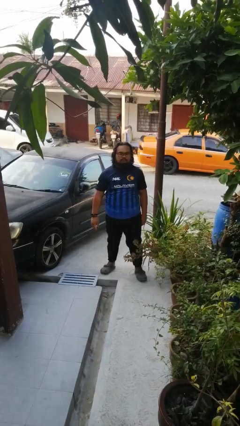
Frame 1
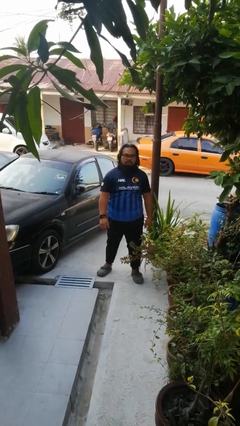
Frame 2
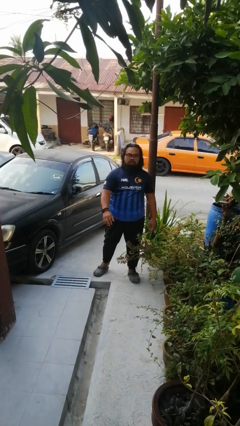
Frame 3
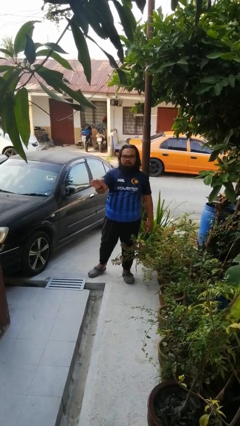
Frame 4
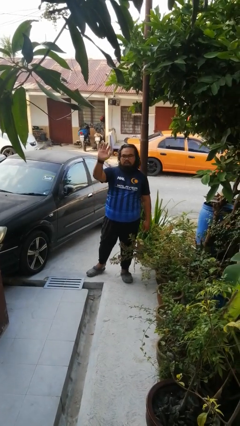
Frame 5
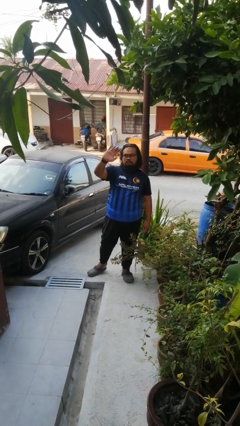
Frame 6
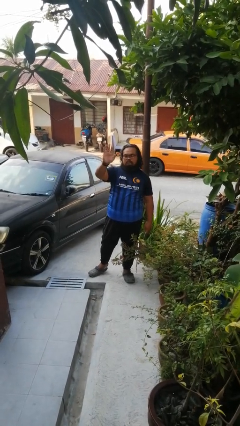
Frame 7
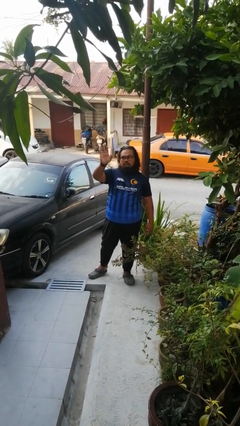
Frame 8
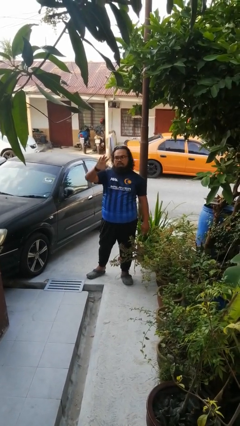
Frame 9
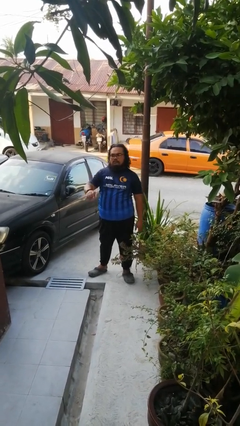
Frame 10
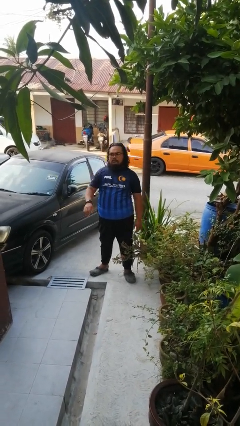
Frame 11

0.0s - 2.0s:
person waves at person

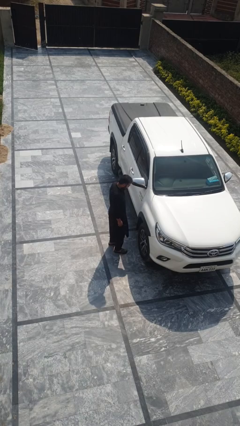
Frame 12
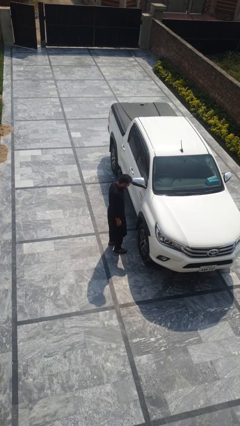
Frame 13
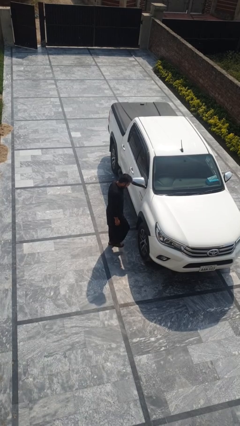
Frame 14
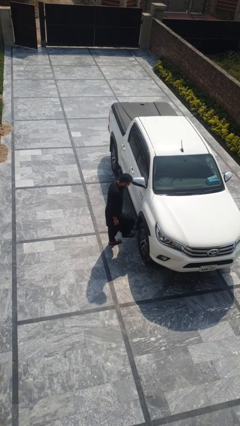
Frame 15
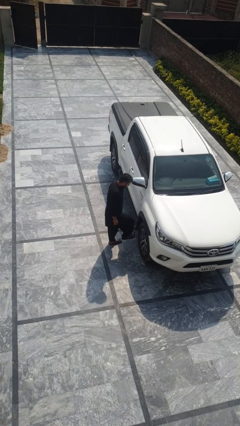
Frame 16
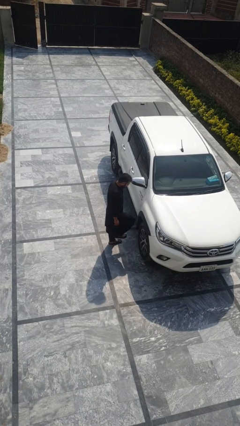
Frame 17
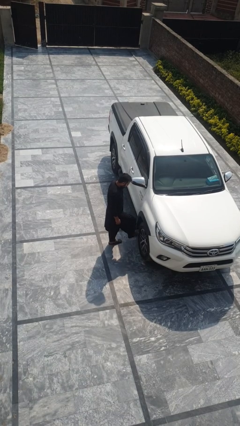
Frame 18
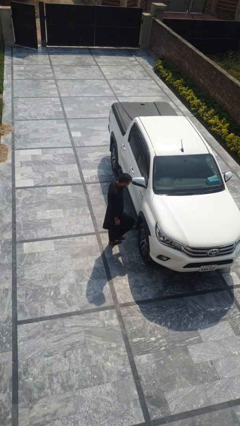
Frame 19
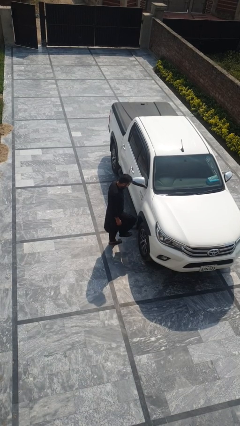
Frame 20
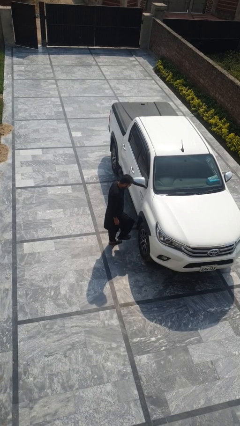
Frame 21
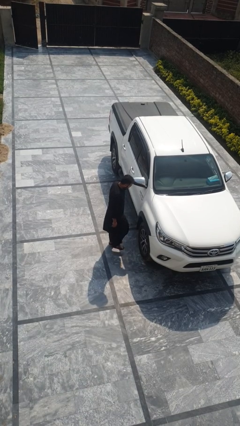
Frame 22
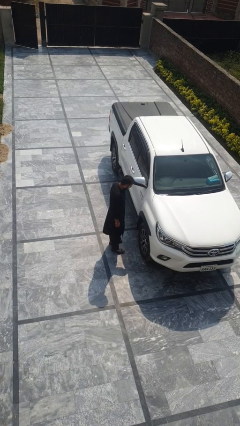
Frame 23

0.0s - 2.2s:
person kicks car tires

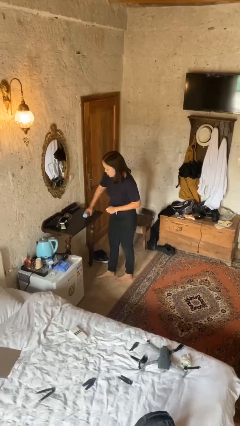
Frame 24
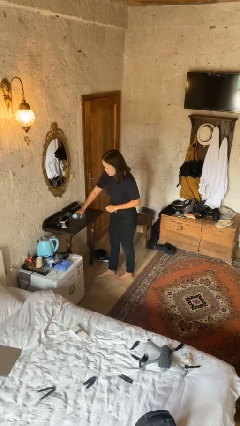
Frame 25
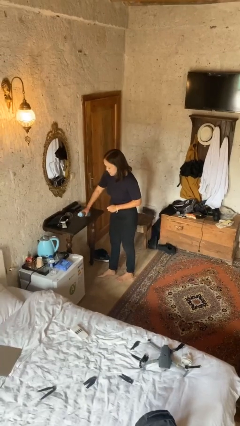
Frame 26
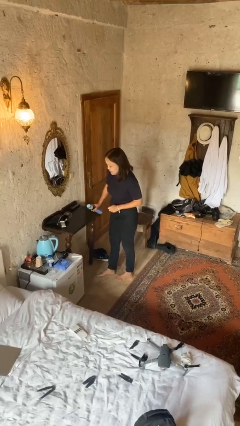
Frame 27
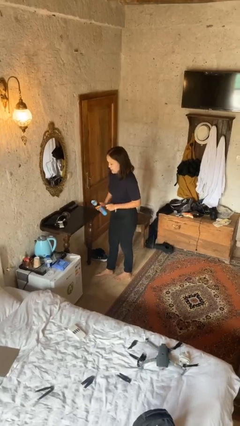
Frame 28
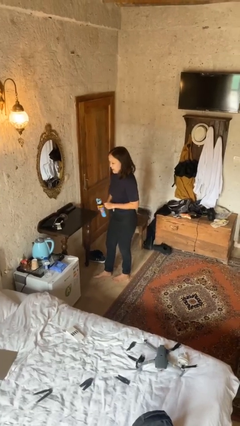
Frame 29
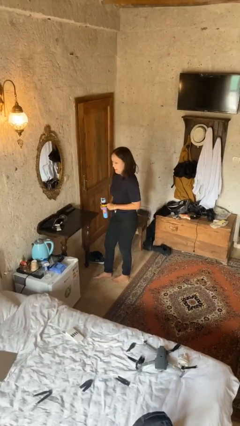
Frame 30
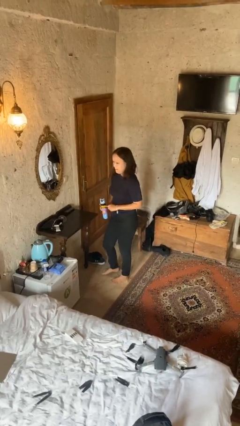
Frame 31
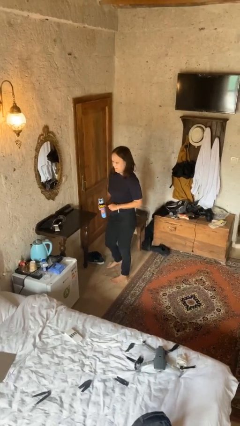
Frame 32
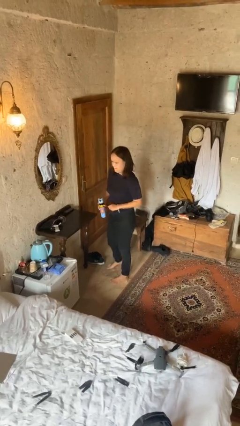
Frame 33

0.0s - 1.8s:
person sprays from bottle

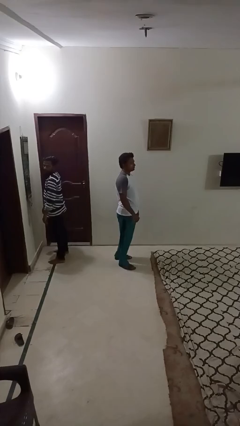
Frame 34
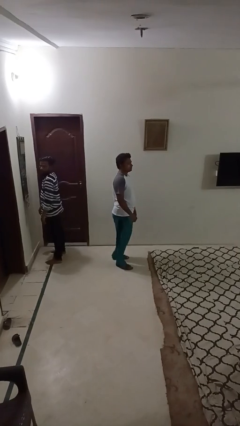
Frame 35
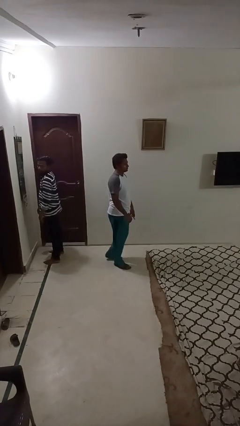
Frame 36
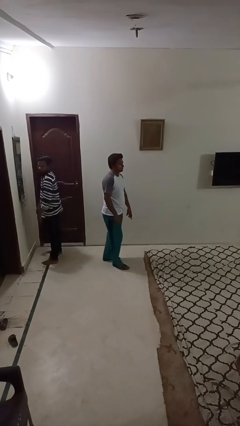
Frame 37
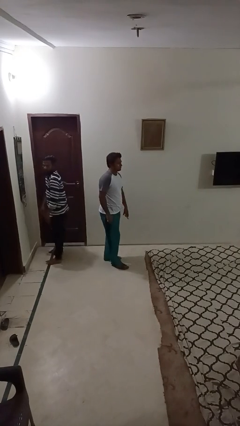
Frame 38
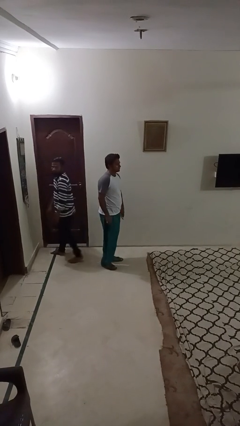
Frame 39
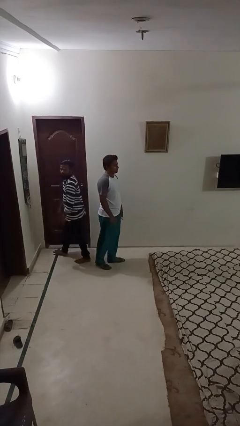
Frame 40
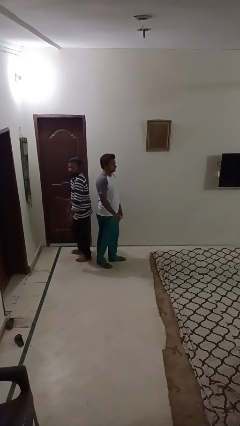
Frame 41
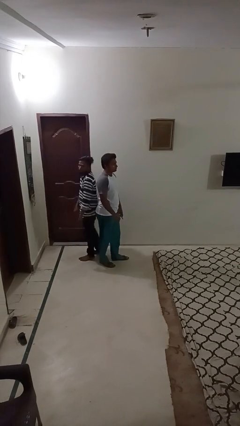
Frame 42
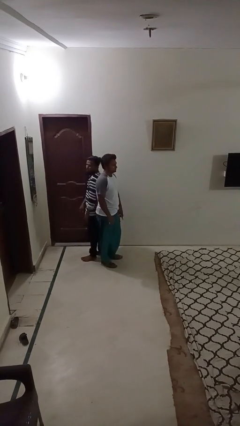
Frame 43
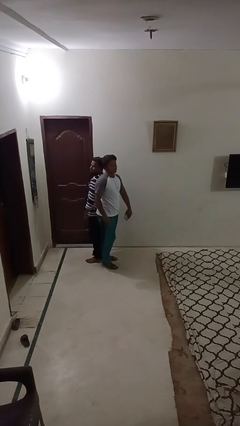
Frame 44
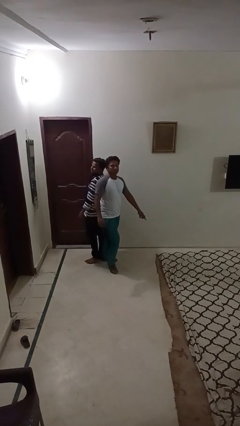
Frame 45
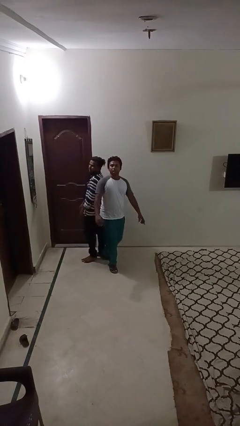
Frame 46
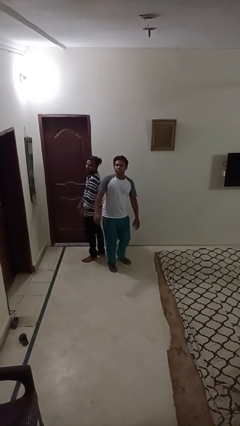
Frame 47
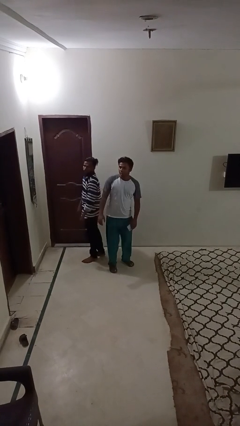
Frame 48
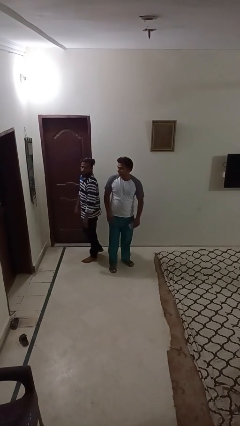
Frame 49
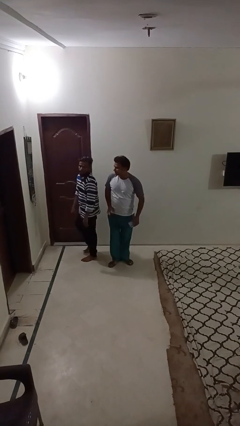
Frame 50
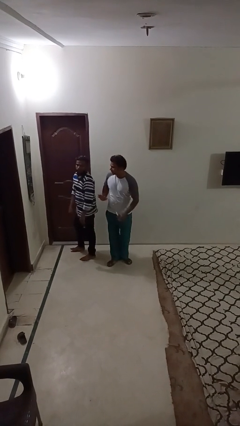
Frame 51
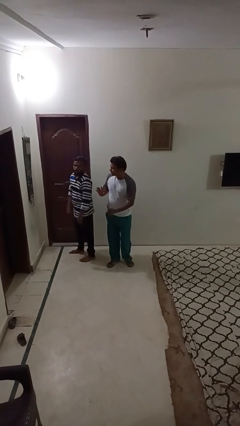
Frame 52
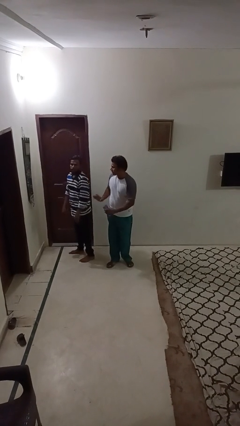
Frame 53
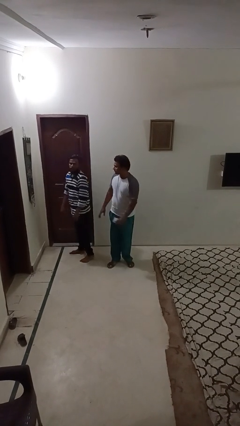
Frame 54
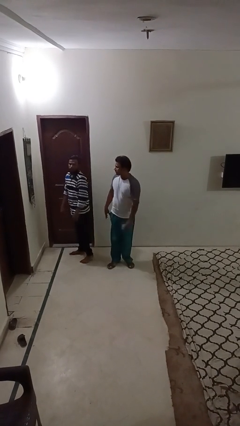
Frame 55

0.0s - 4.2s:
person bumps into person

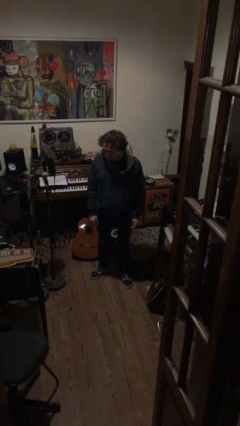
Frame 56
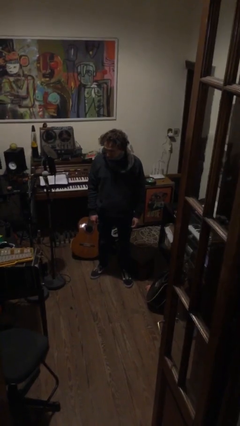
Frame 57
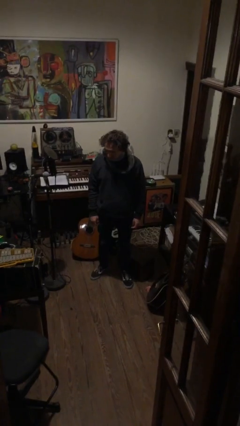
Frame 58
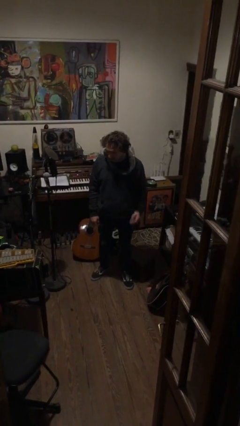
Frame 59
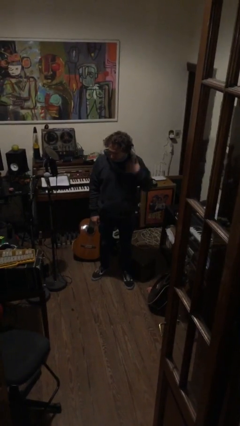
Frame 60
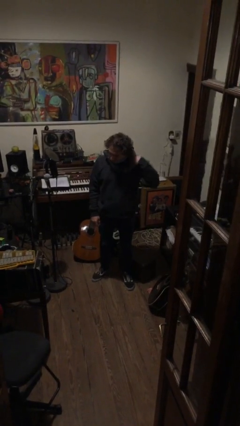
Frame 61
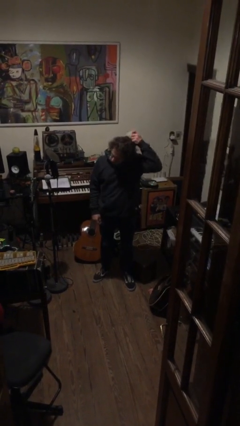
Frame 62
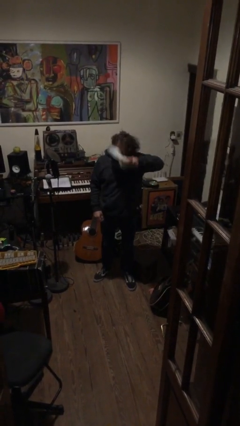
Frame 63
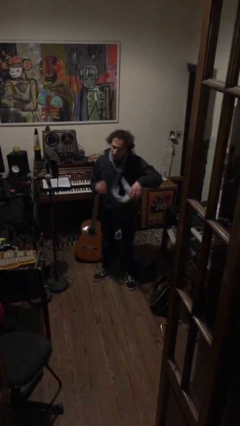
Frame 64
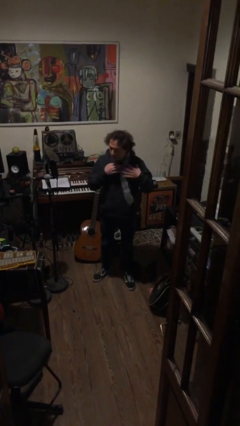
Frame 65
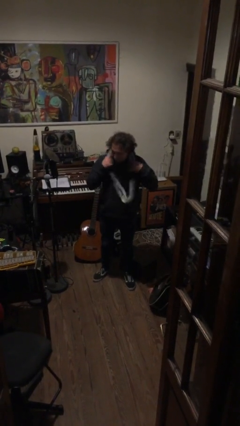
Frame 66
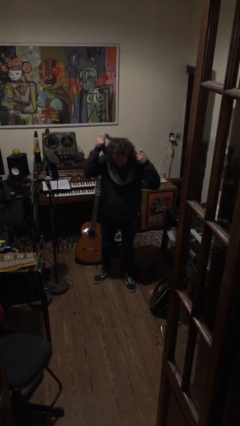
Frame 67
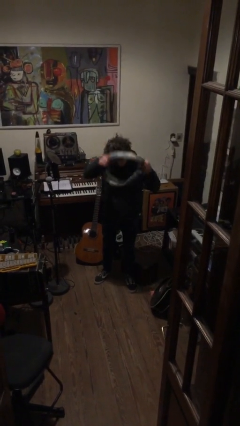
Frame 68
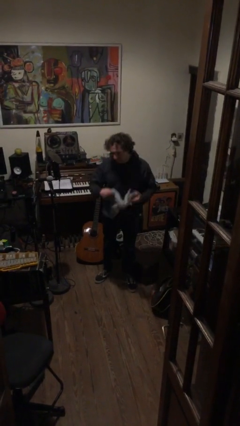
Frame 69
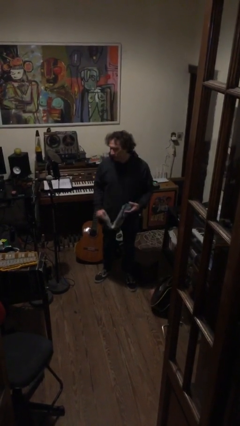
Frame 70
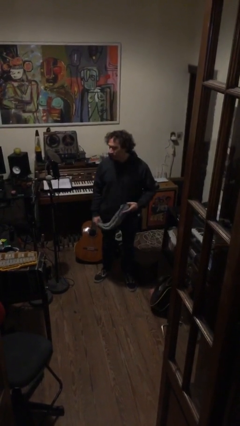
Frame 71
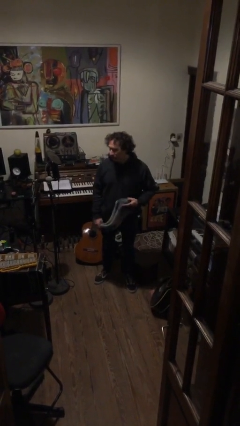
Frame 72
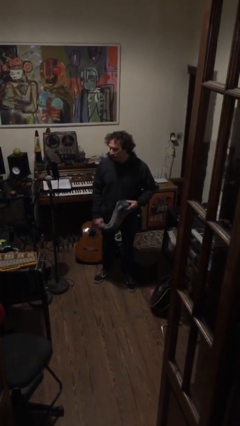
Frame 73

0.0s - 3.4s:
person takes off scarf

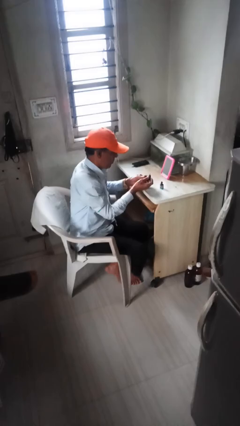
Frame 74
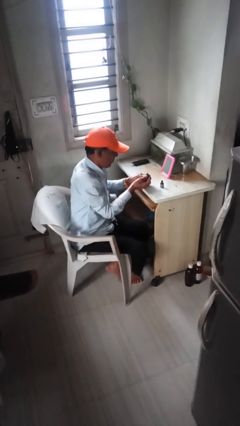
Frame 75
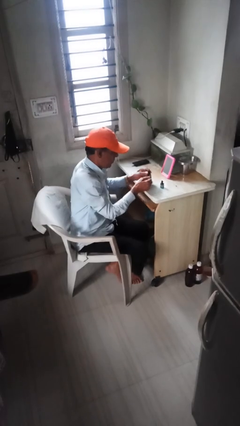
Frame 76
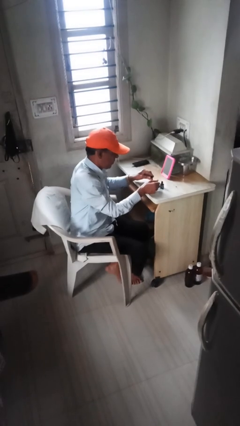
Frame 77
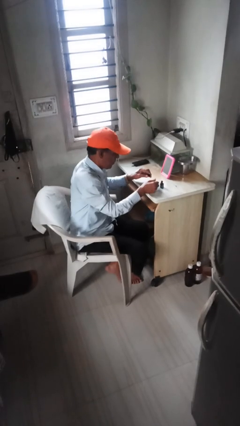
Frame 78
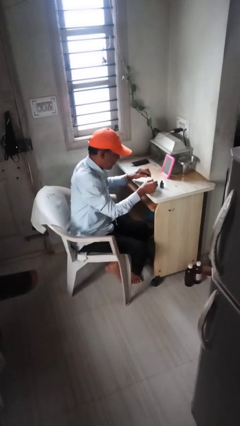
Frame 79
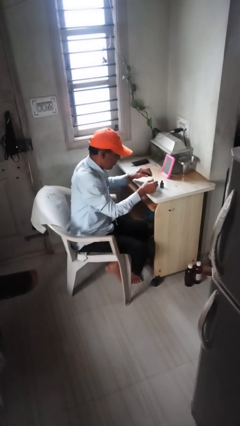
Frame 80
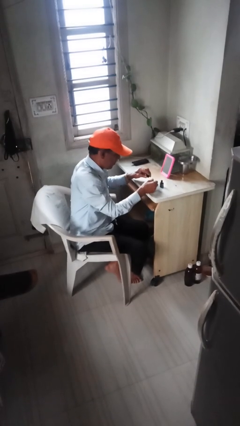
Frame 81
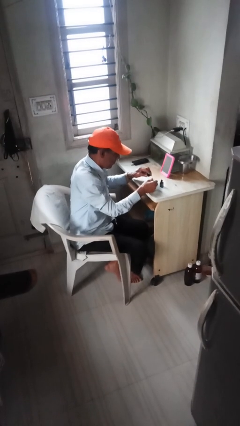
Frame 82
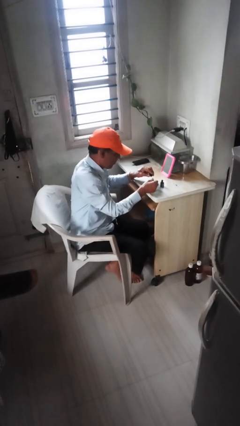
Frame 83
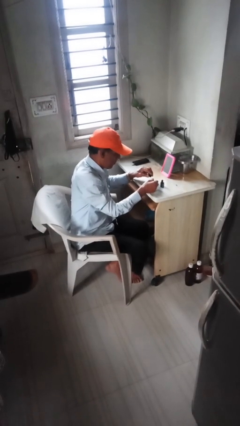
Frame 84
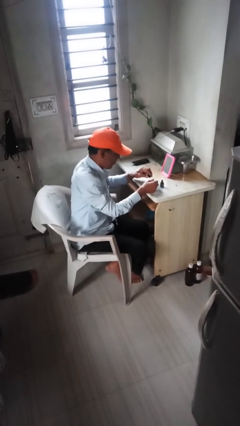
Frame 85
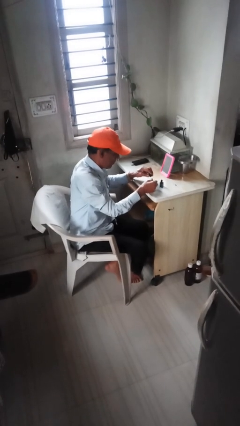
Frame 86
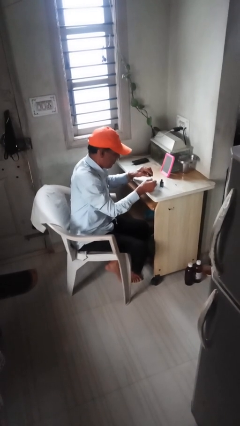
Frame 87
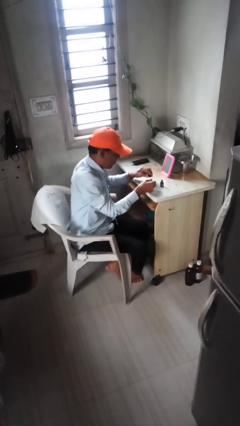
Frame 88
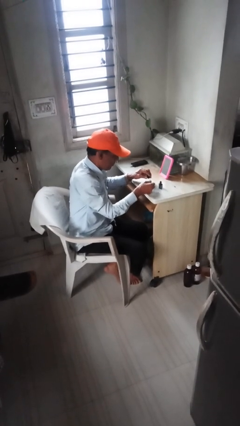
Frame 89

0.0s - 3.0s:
person paints fingernails

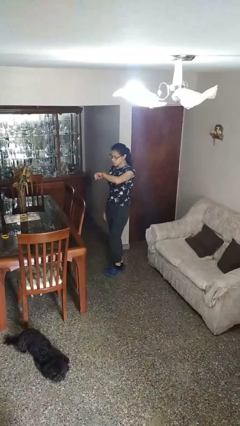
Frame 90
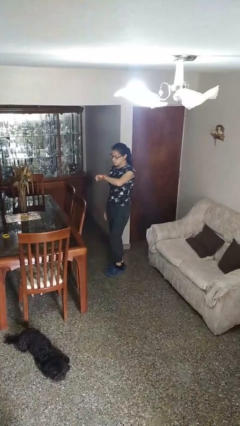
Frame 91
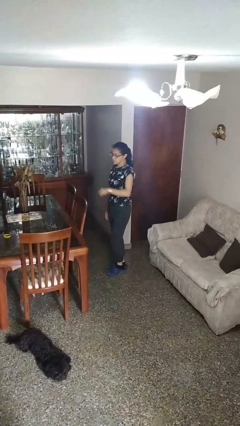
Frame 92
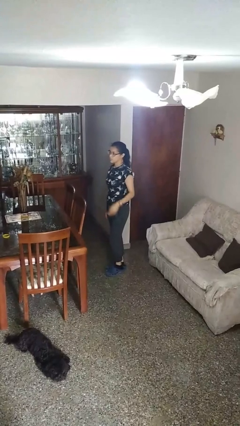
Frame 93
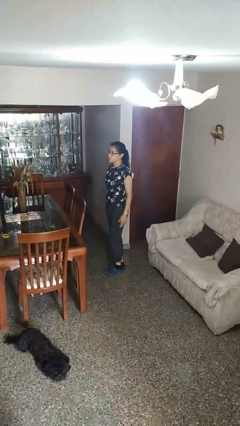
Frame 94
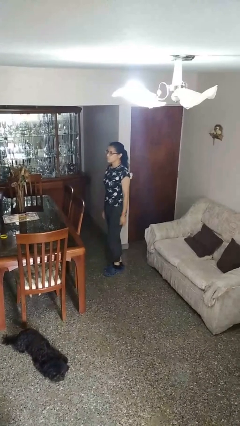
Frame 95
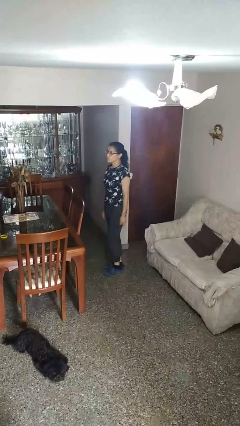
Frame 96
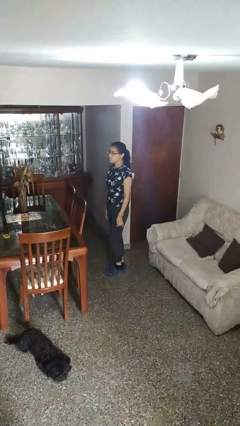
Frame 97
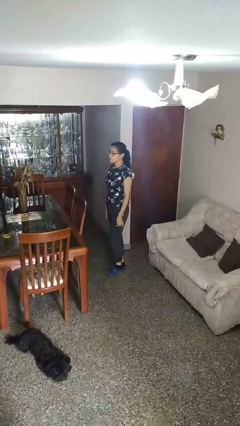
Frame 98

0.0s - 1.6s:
person looks at wristwatch
